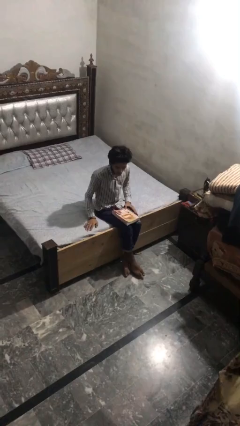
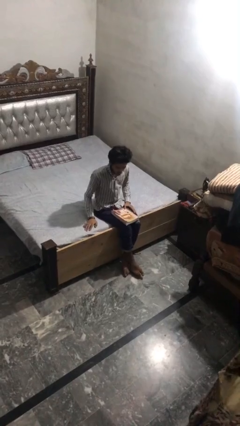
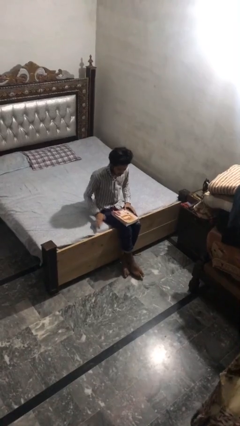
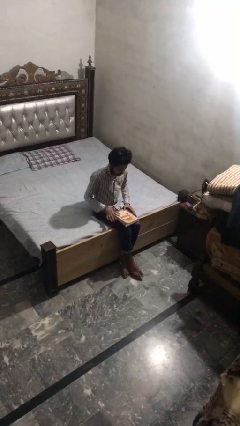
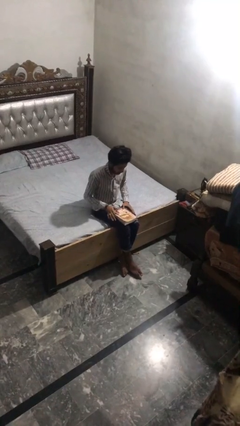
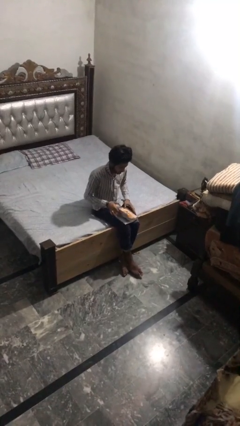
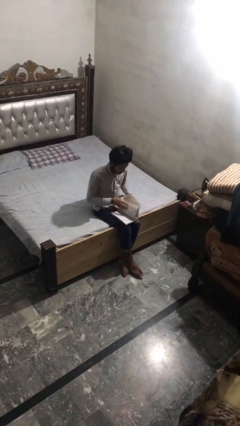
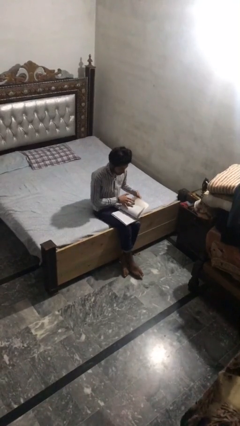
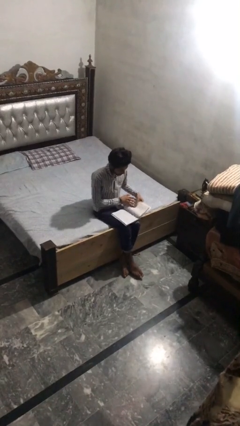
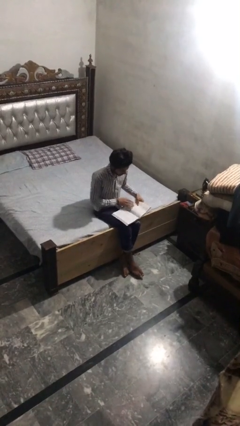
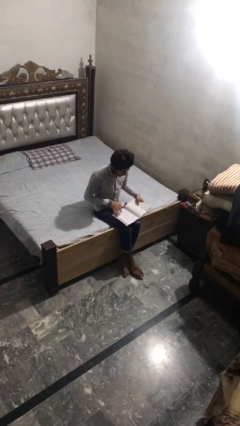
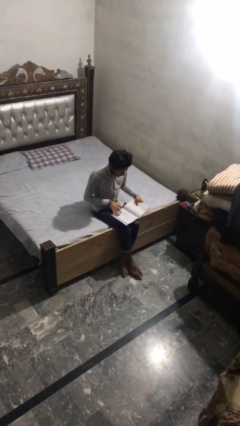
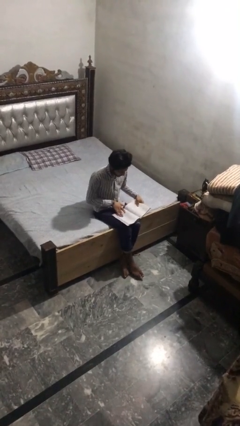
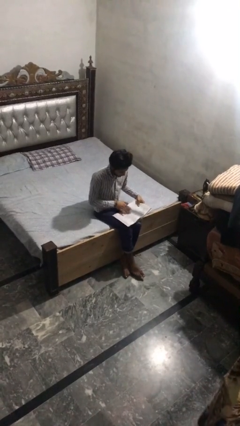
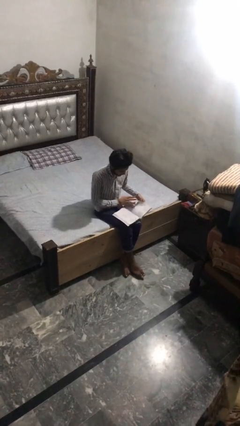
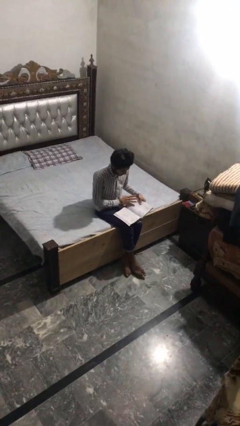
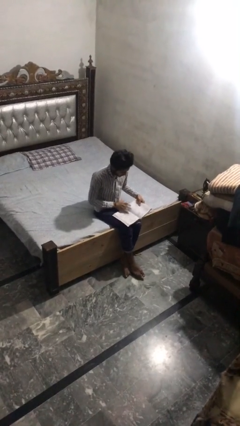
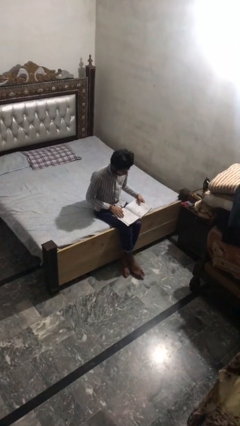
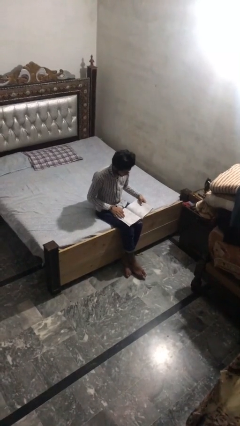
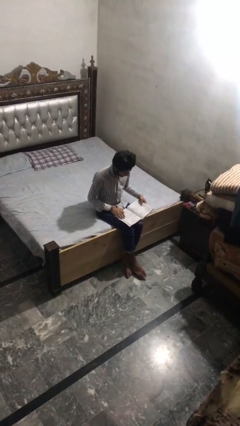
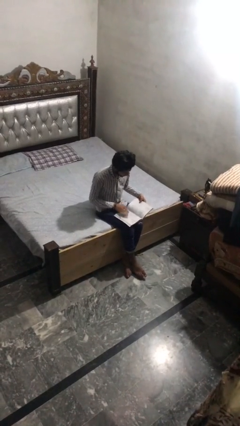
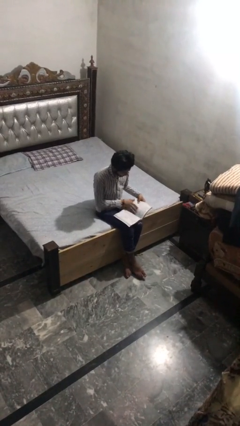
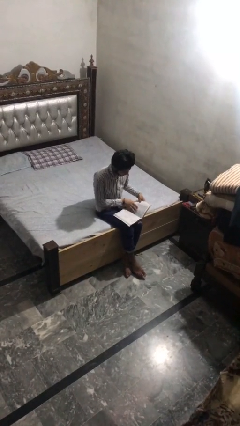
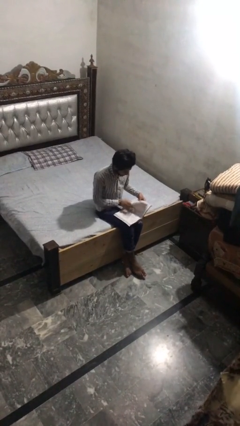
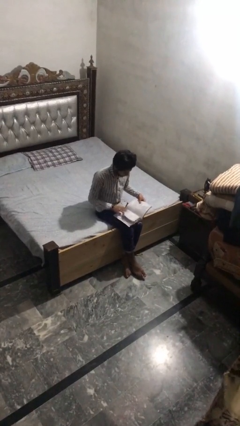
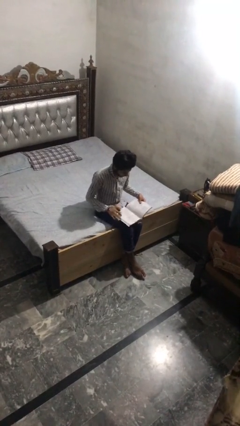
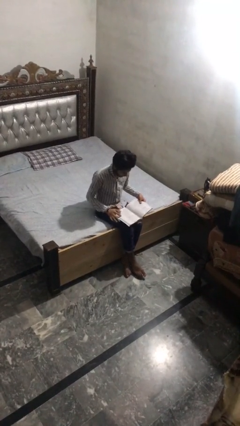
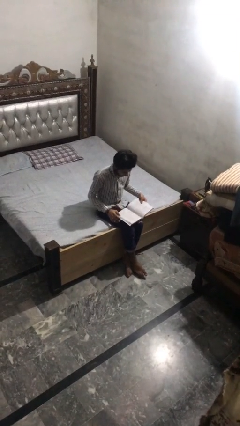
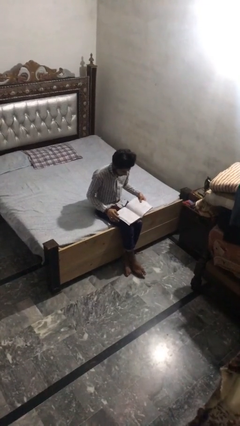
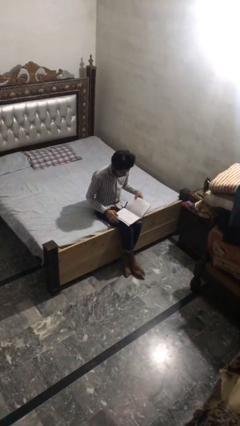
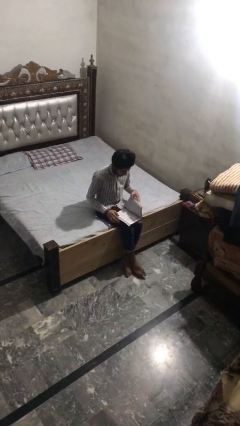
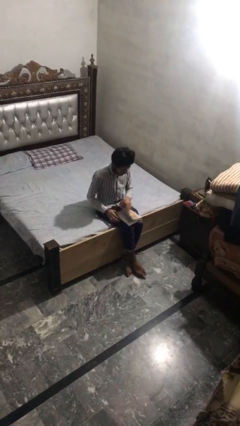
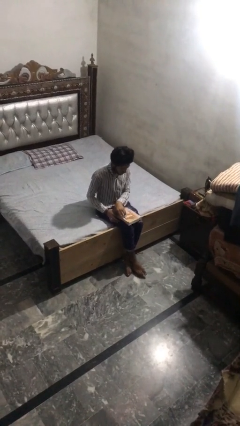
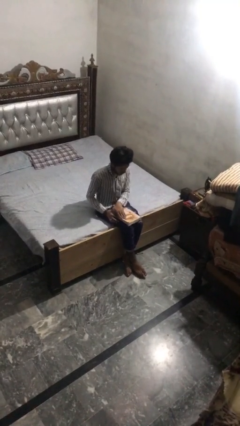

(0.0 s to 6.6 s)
person reads book

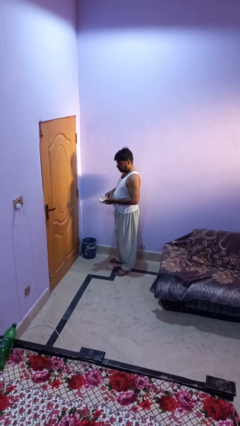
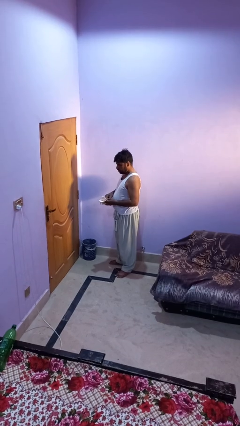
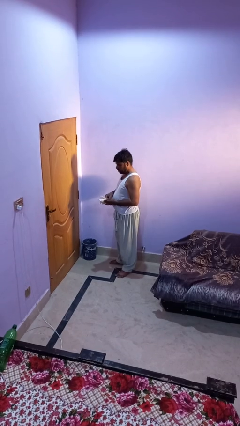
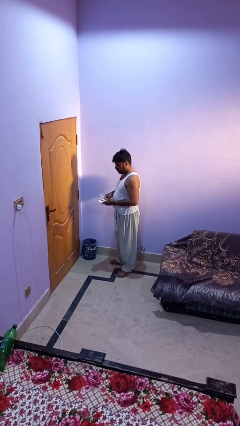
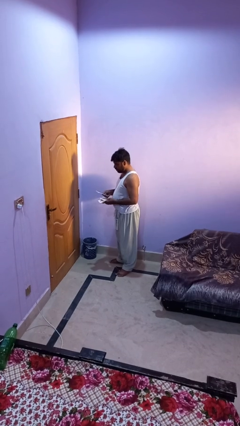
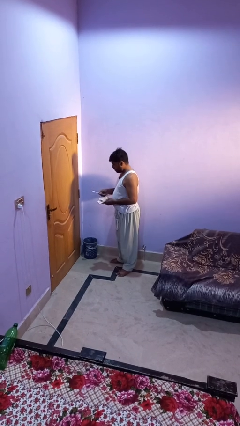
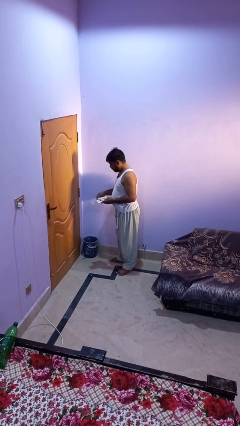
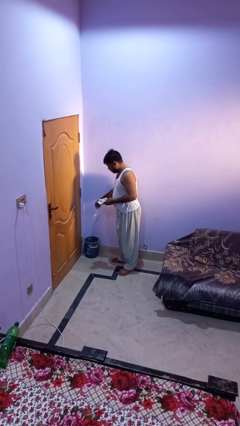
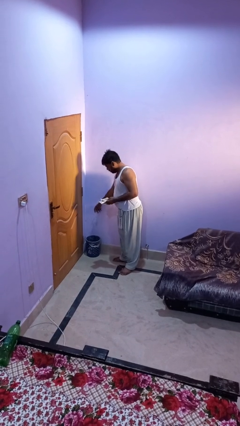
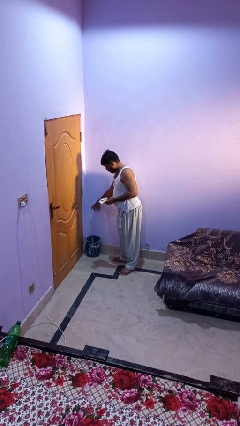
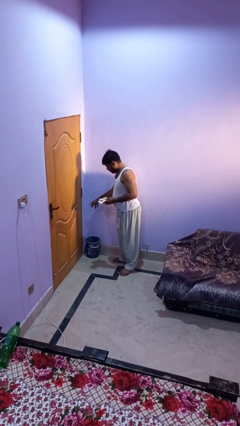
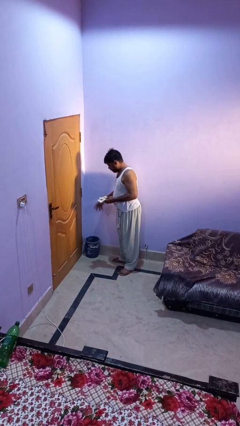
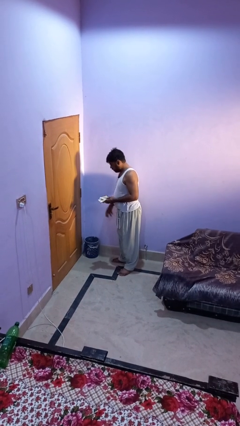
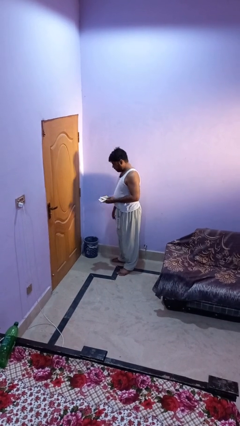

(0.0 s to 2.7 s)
person discards trash

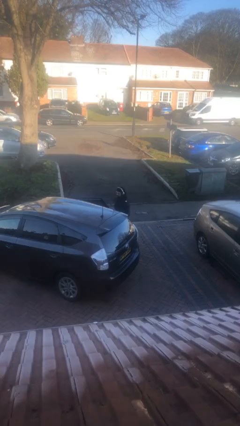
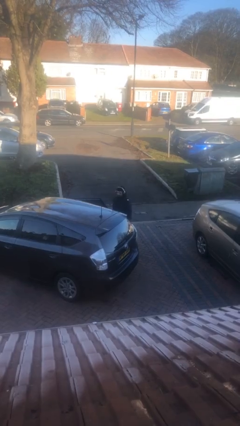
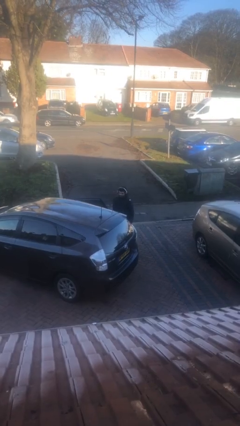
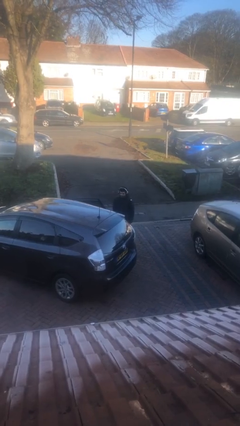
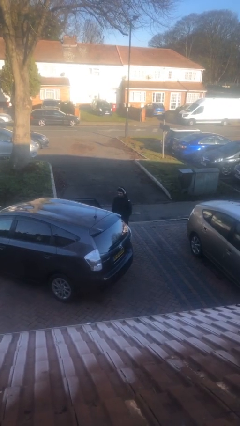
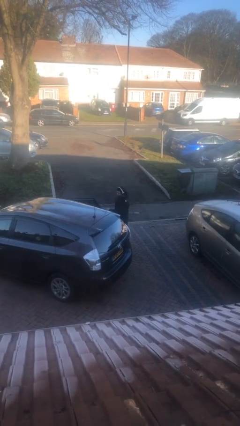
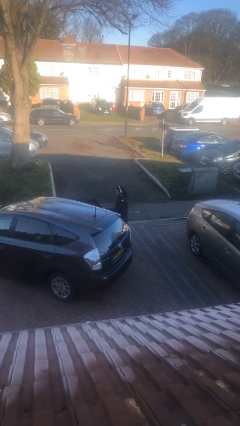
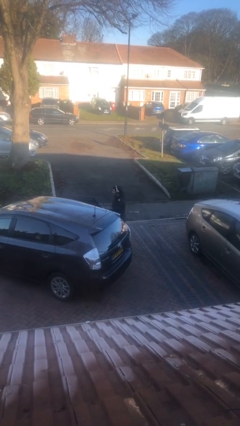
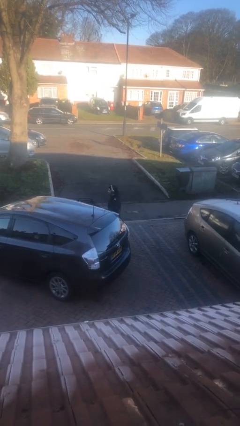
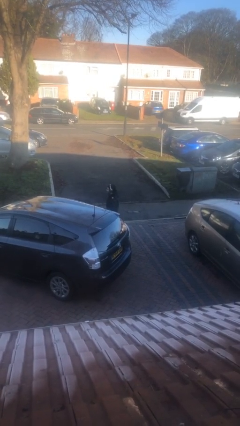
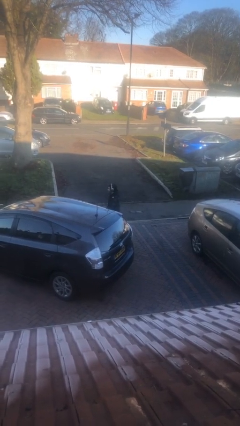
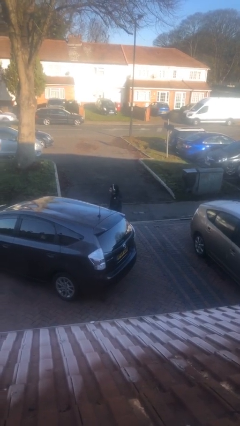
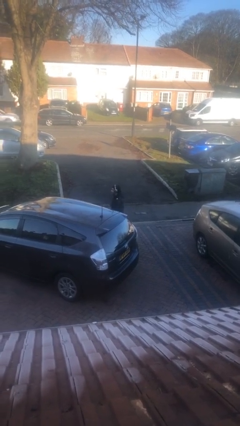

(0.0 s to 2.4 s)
person closes car door

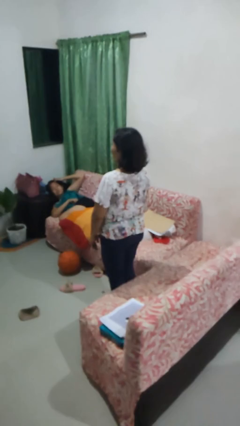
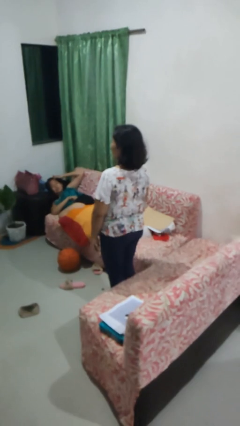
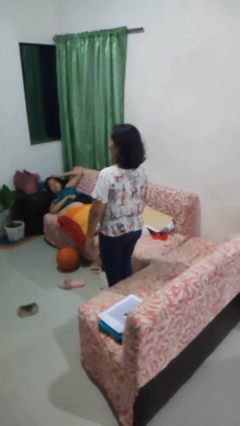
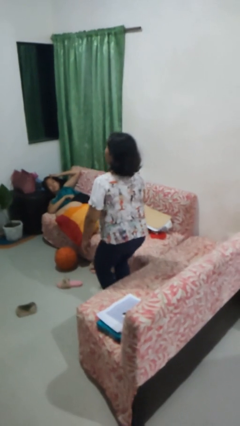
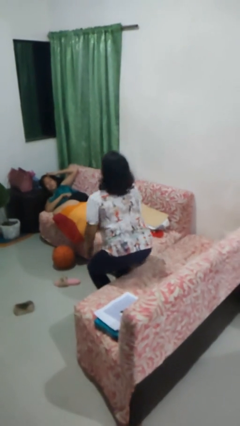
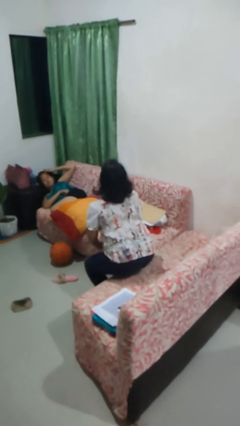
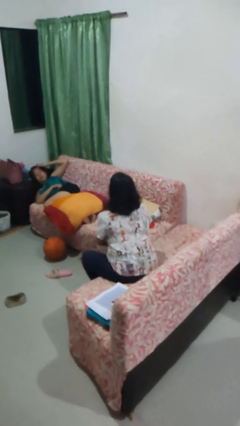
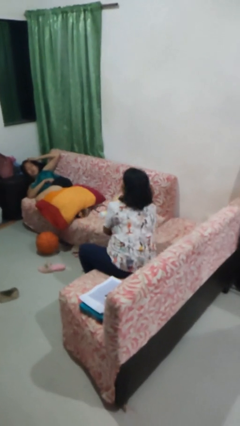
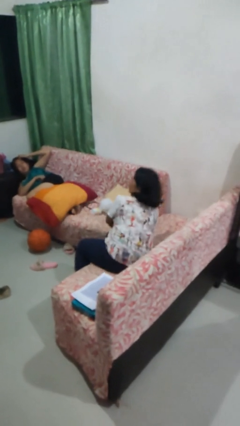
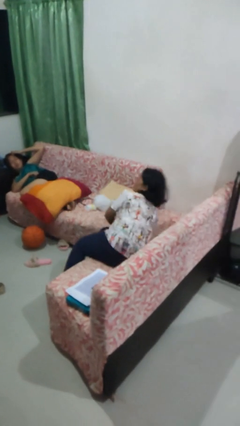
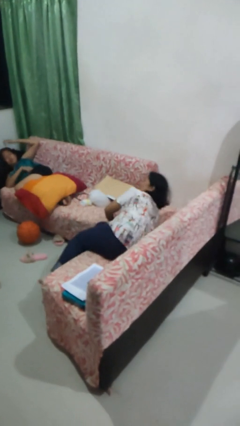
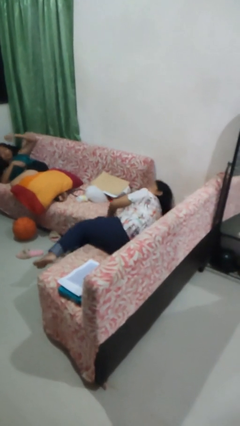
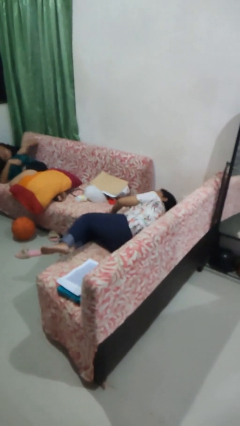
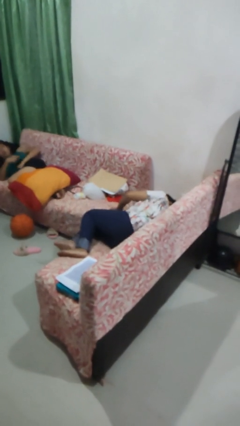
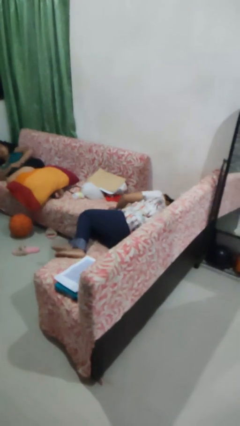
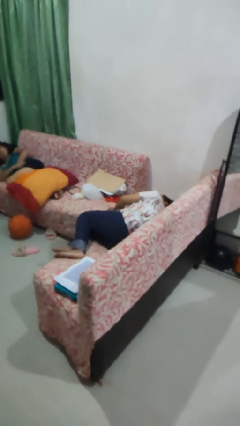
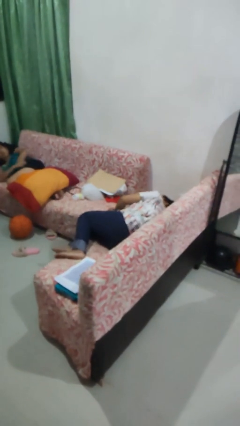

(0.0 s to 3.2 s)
person lies down on couch

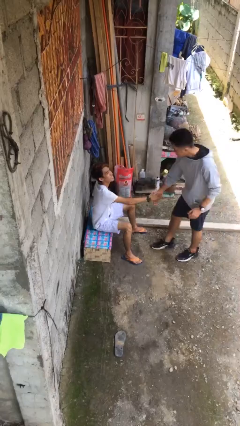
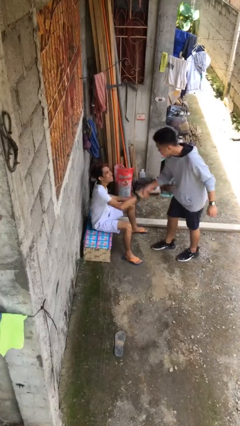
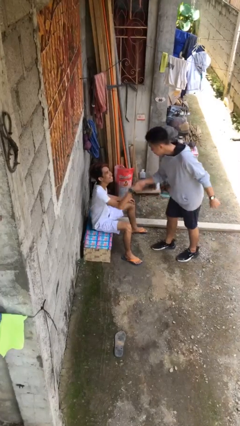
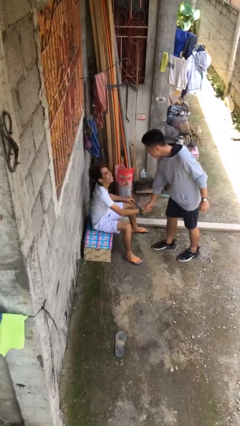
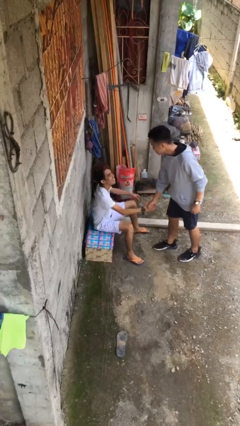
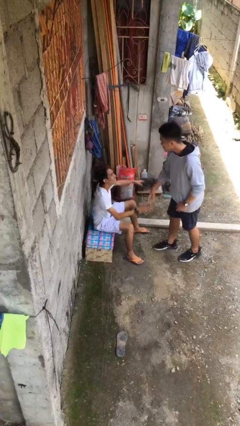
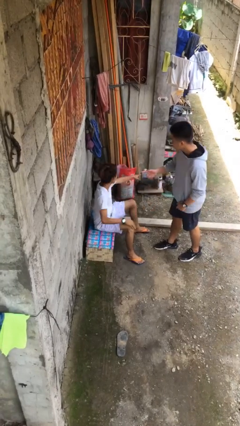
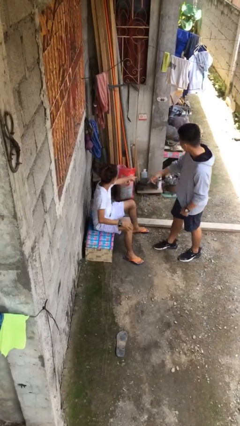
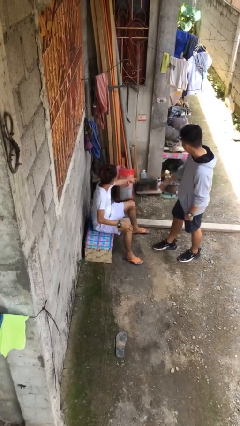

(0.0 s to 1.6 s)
person shakes hand

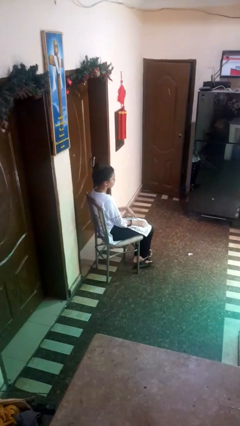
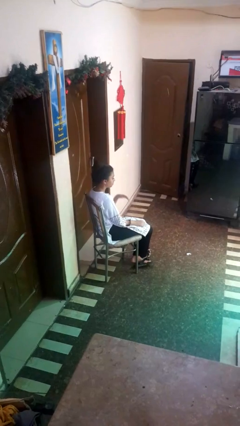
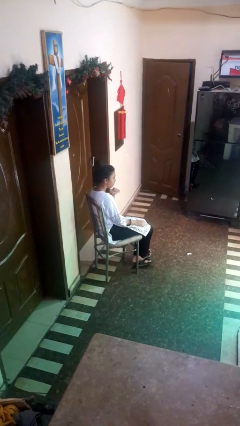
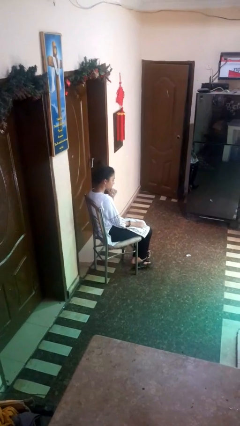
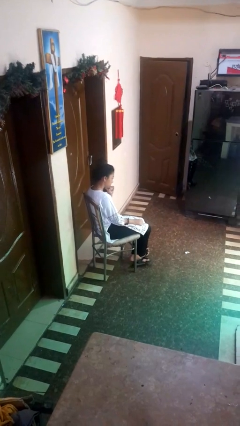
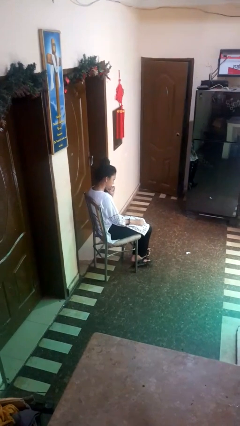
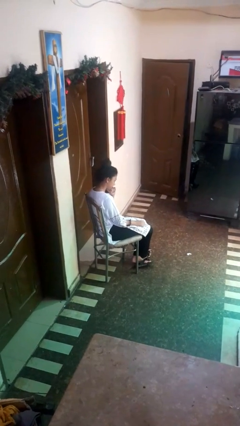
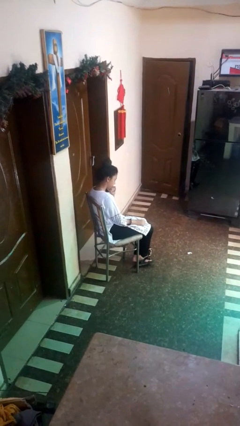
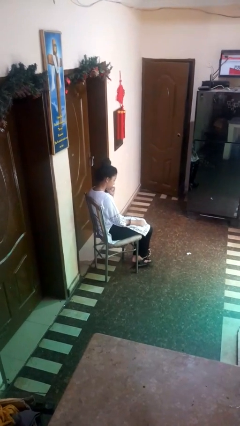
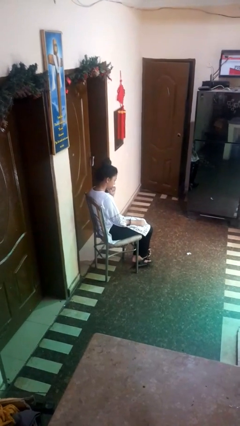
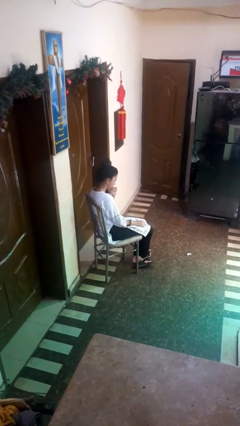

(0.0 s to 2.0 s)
person strokes chin
